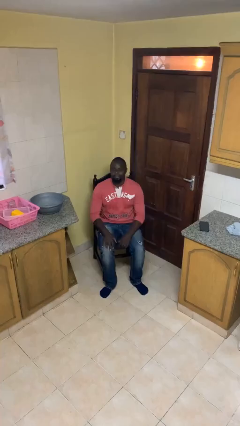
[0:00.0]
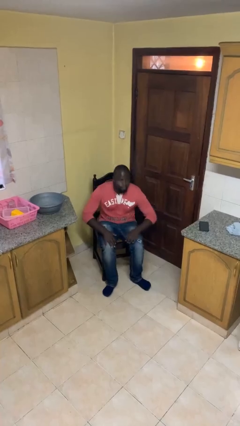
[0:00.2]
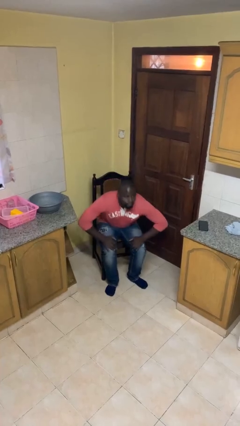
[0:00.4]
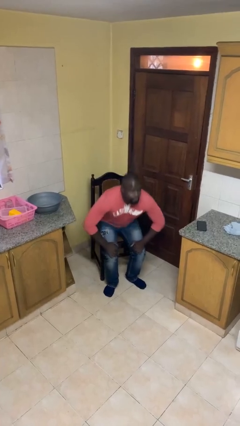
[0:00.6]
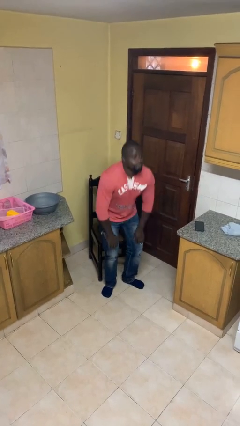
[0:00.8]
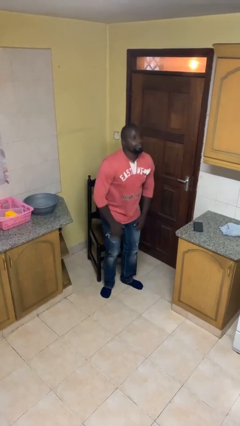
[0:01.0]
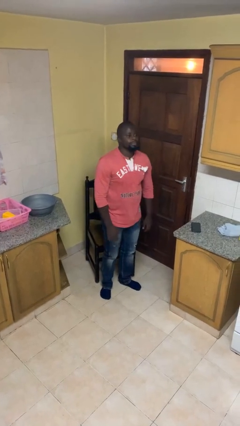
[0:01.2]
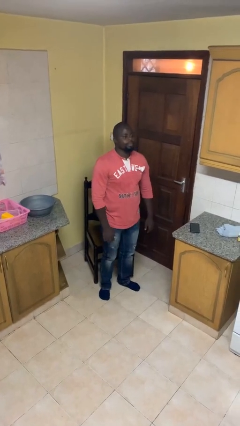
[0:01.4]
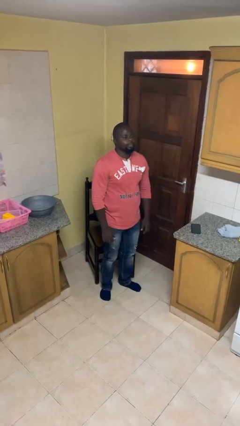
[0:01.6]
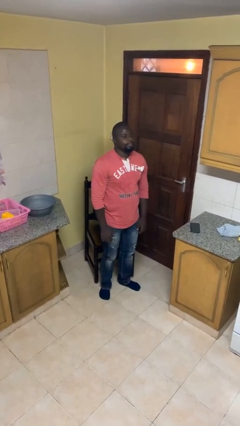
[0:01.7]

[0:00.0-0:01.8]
person stands up

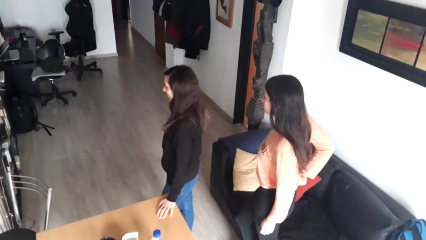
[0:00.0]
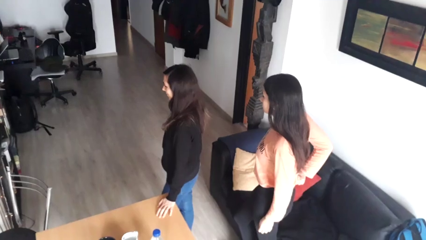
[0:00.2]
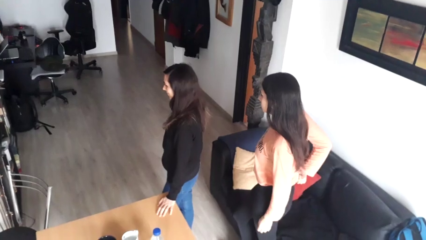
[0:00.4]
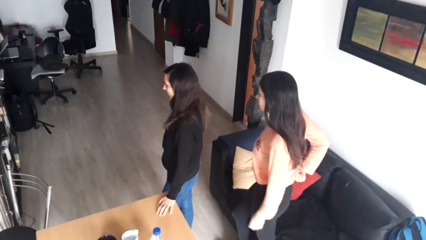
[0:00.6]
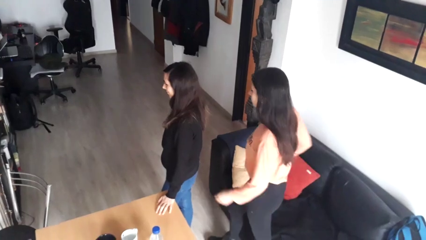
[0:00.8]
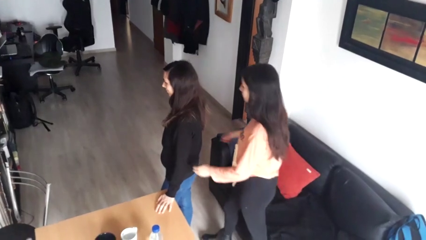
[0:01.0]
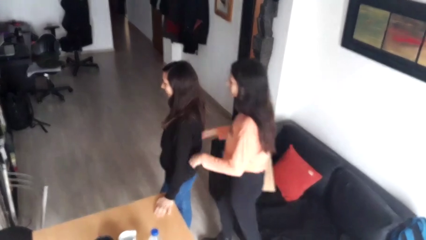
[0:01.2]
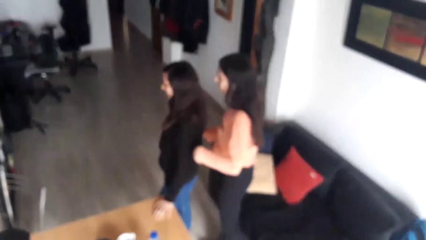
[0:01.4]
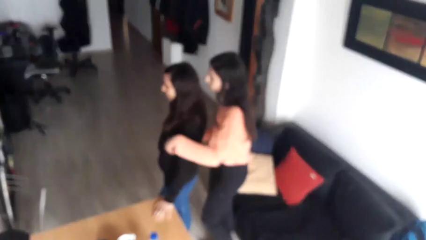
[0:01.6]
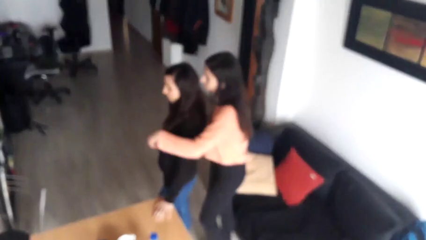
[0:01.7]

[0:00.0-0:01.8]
person hugs person from behind

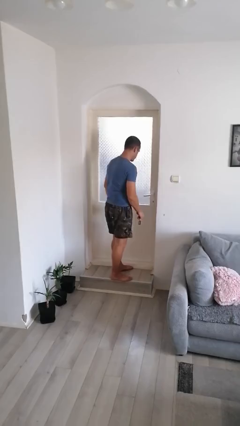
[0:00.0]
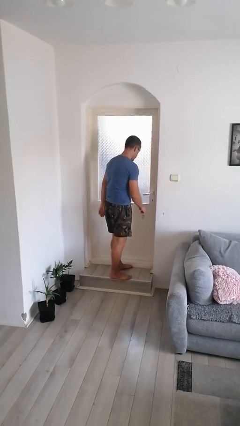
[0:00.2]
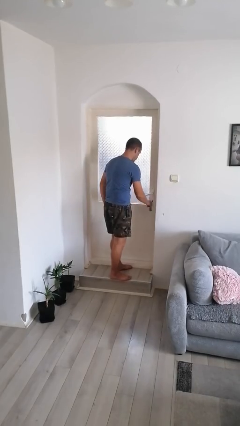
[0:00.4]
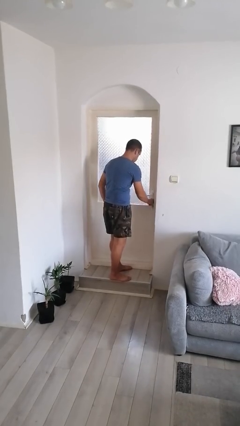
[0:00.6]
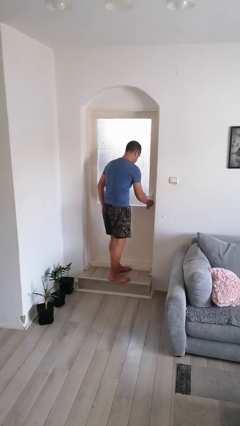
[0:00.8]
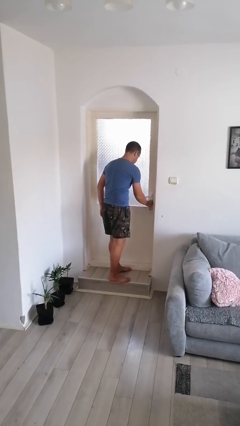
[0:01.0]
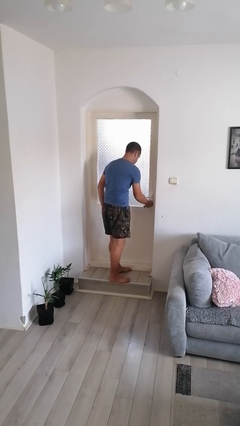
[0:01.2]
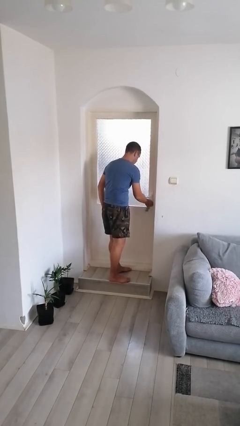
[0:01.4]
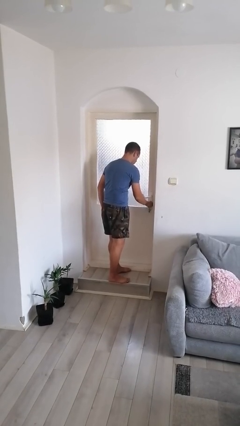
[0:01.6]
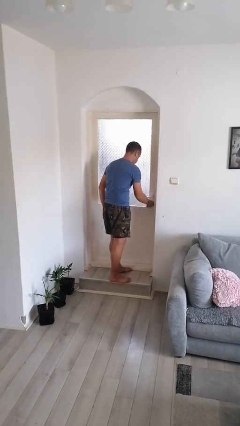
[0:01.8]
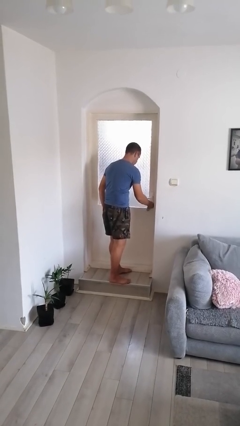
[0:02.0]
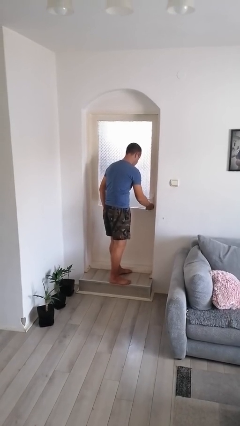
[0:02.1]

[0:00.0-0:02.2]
person locks door with keys

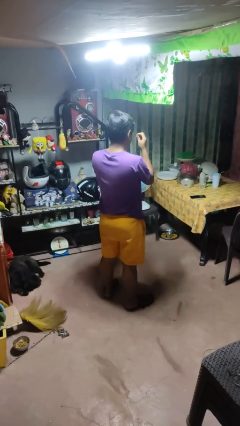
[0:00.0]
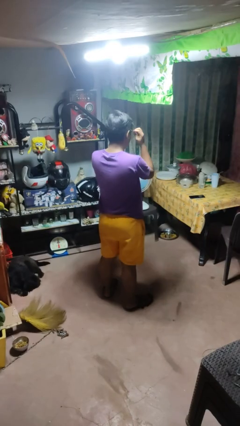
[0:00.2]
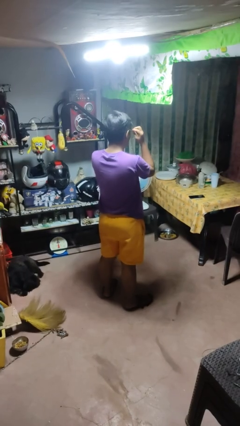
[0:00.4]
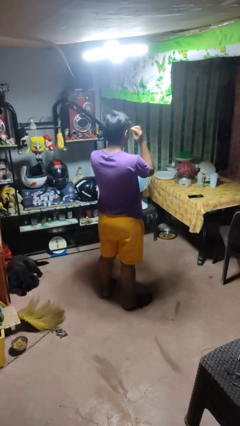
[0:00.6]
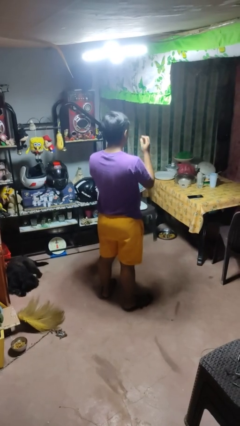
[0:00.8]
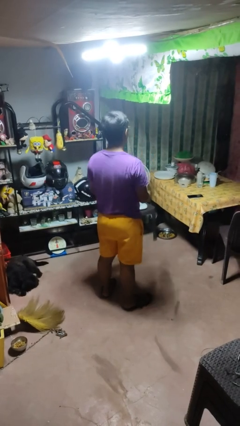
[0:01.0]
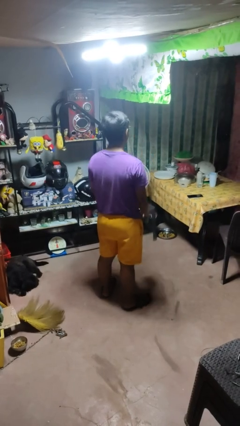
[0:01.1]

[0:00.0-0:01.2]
person puts on glasses

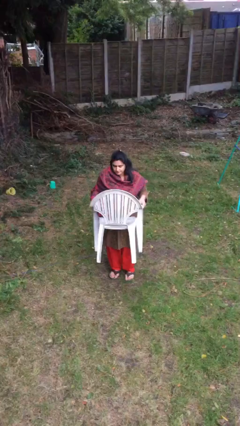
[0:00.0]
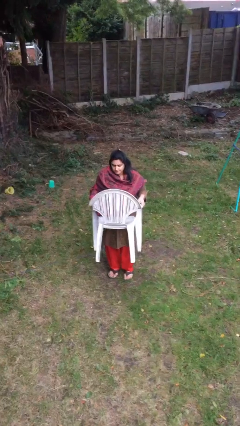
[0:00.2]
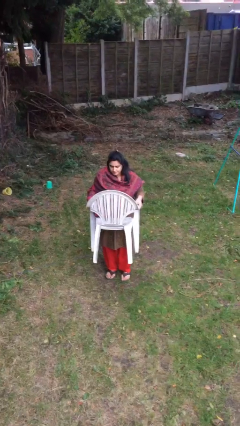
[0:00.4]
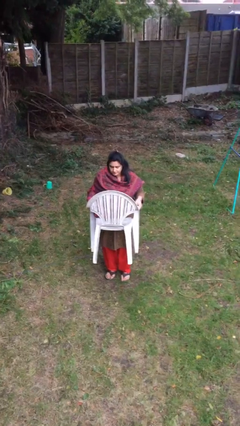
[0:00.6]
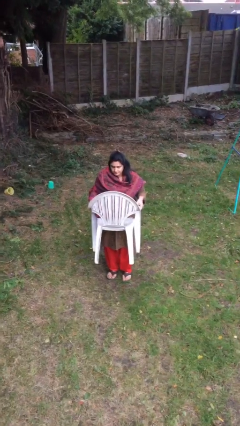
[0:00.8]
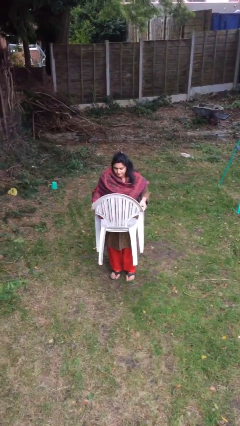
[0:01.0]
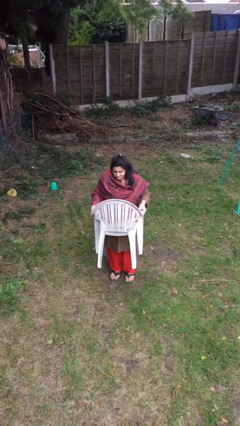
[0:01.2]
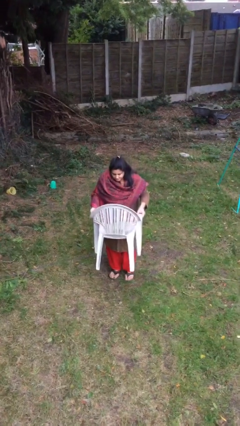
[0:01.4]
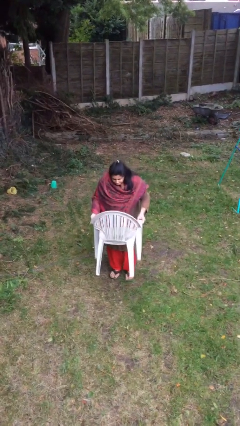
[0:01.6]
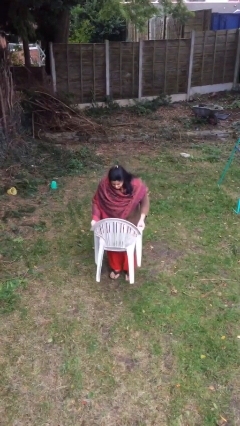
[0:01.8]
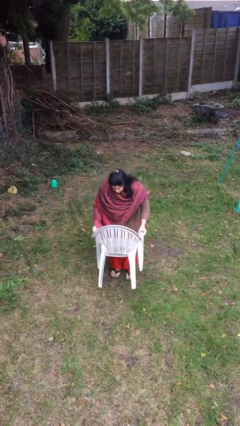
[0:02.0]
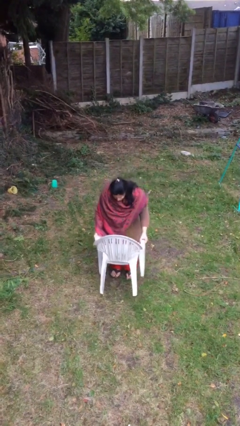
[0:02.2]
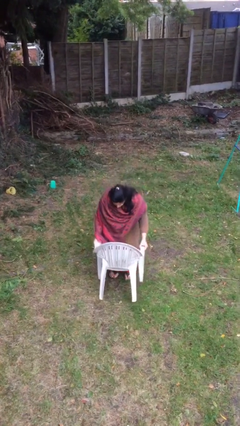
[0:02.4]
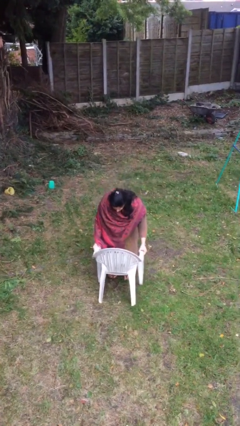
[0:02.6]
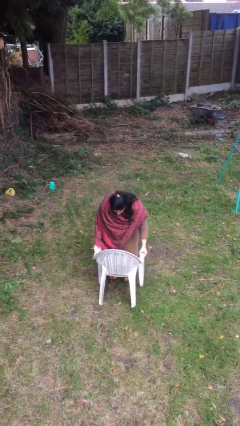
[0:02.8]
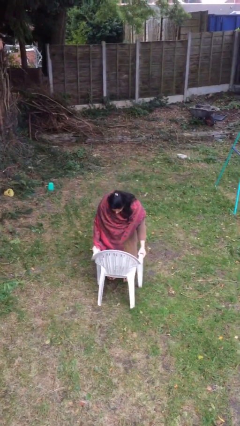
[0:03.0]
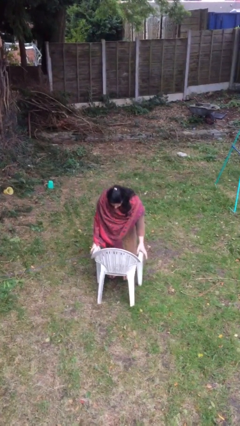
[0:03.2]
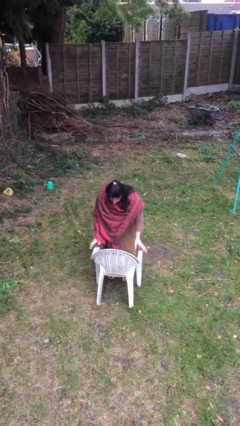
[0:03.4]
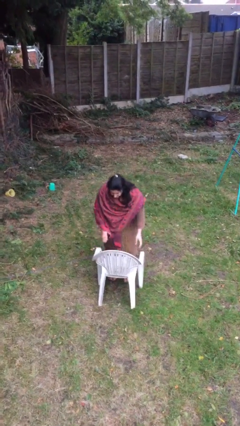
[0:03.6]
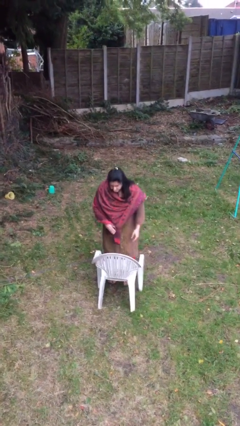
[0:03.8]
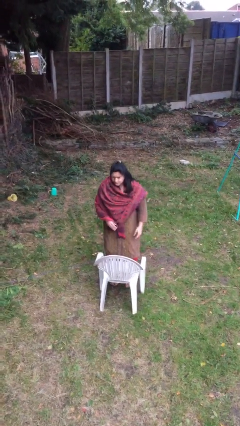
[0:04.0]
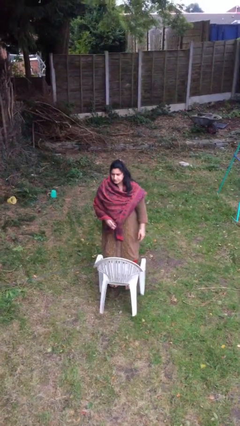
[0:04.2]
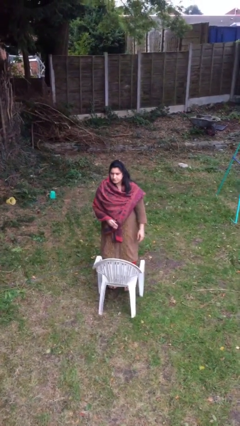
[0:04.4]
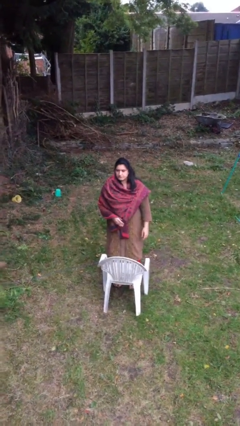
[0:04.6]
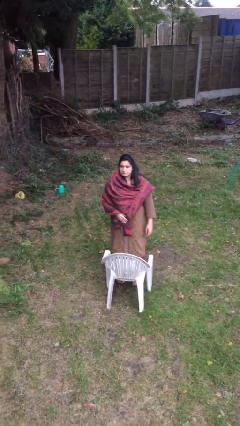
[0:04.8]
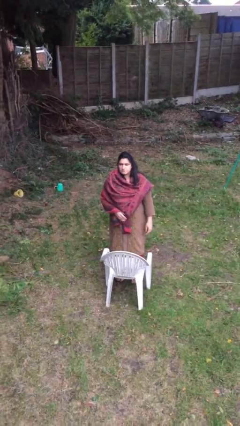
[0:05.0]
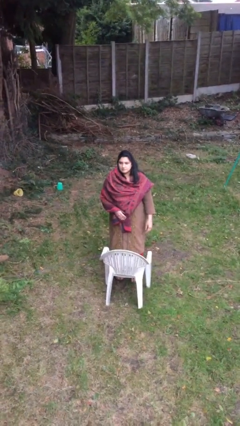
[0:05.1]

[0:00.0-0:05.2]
person puts down object on floor

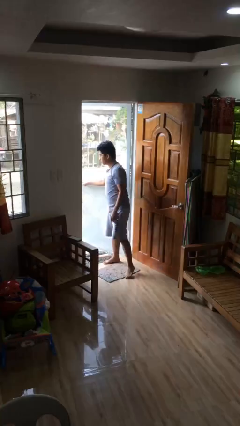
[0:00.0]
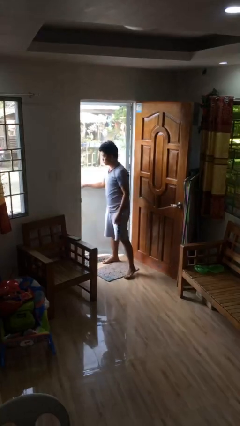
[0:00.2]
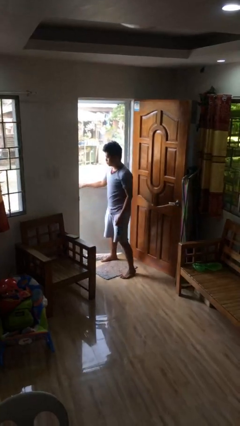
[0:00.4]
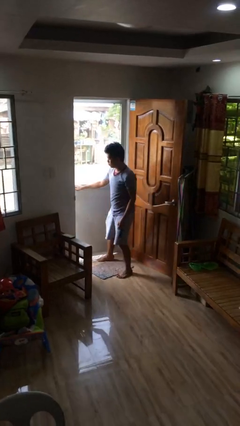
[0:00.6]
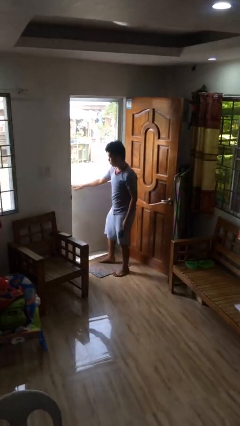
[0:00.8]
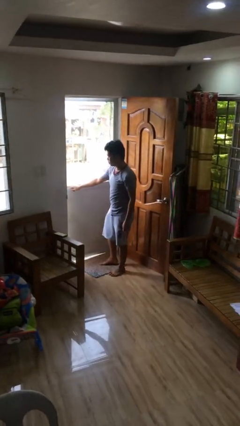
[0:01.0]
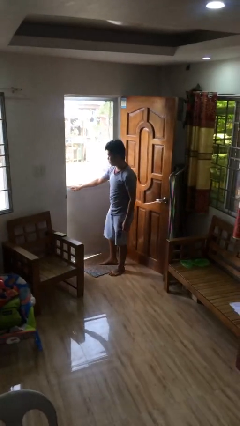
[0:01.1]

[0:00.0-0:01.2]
person closes facility door

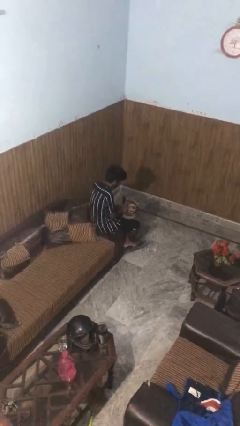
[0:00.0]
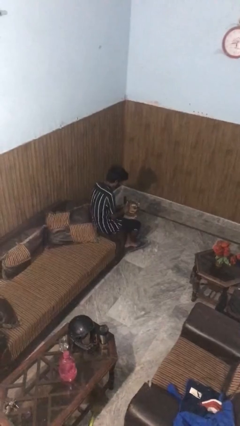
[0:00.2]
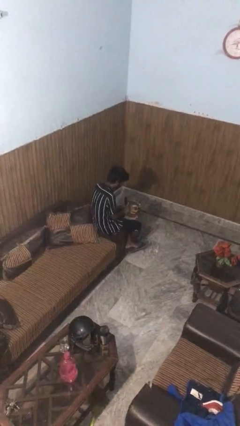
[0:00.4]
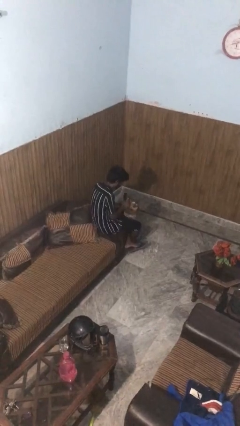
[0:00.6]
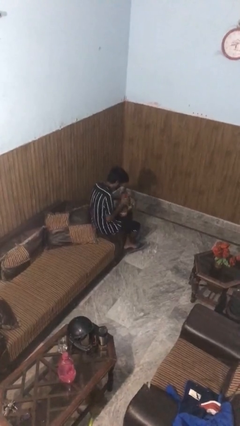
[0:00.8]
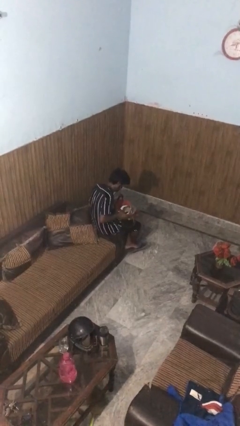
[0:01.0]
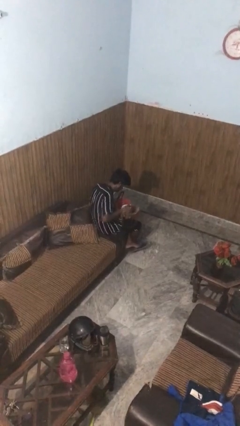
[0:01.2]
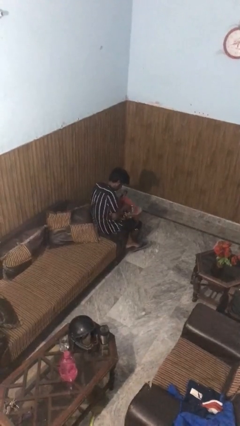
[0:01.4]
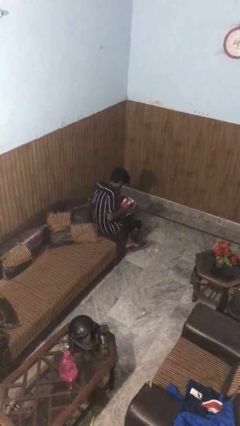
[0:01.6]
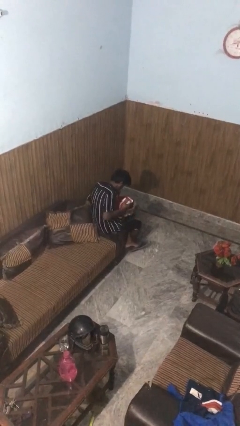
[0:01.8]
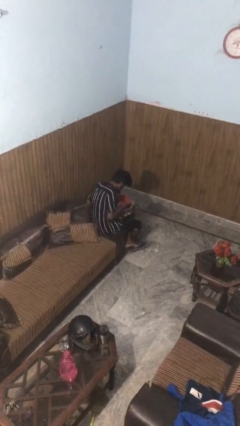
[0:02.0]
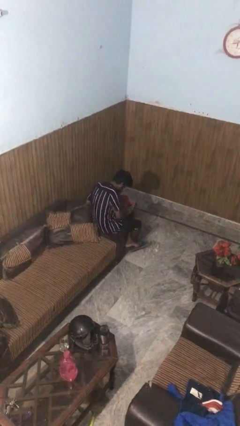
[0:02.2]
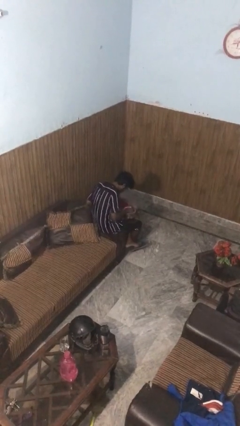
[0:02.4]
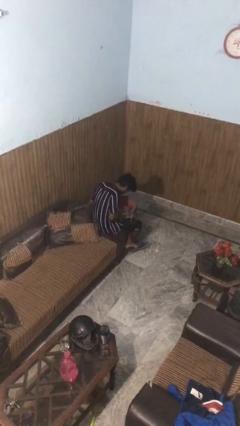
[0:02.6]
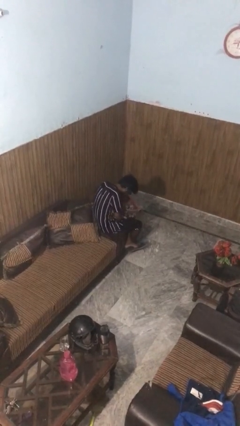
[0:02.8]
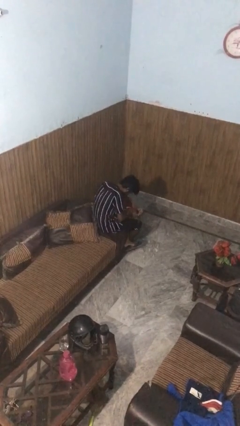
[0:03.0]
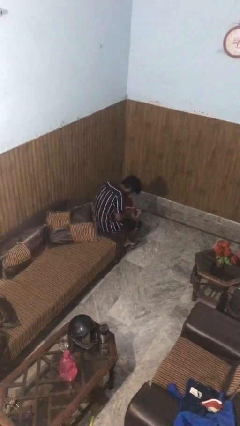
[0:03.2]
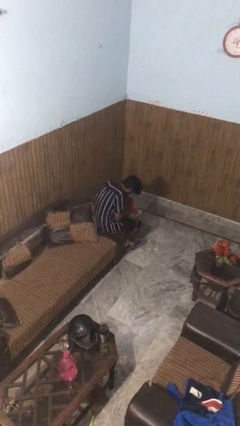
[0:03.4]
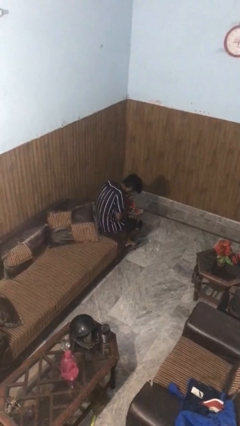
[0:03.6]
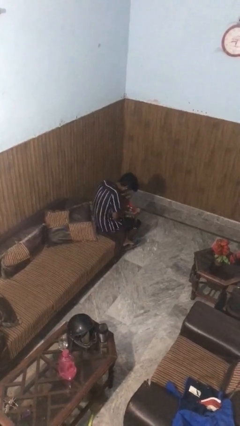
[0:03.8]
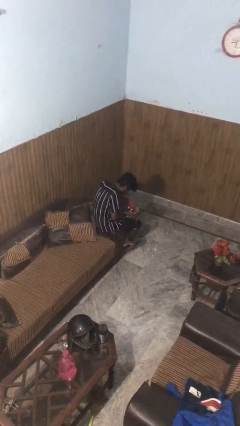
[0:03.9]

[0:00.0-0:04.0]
person searches in purse
